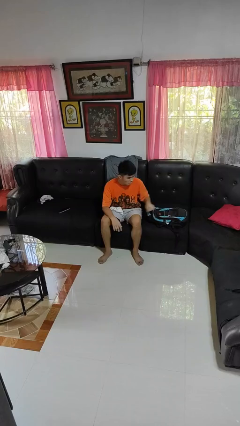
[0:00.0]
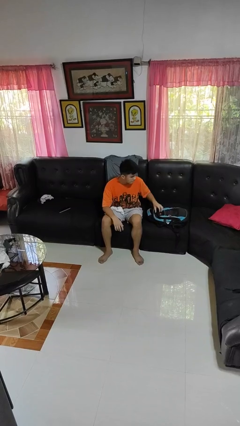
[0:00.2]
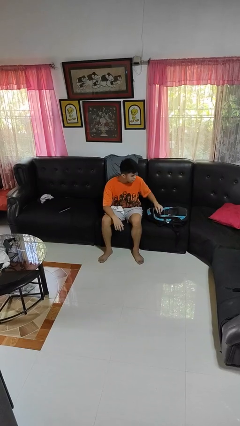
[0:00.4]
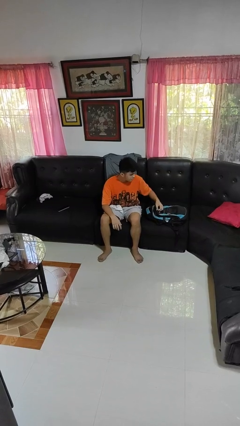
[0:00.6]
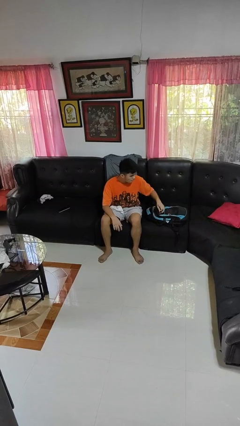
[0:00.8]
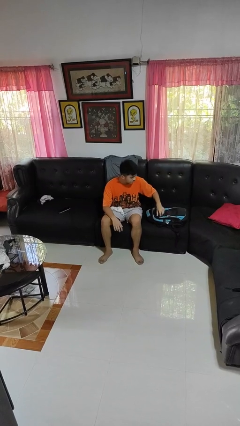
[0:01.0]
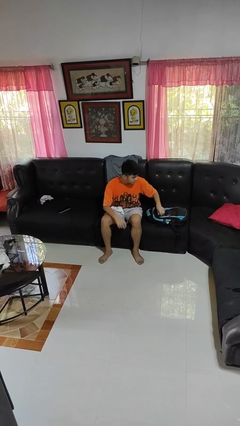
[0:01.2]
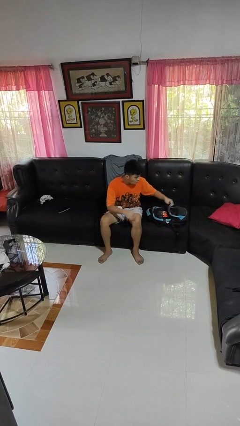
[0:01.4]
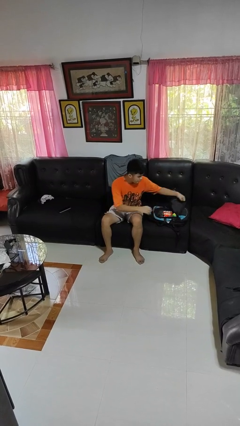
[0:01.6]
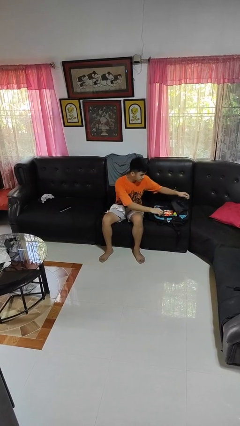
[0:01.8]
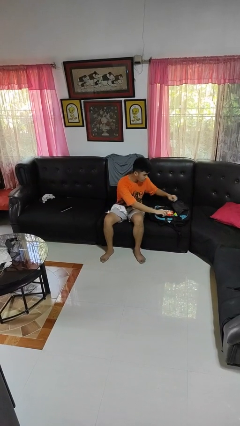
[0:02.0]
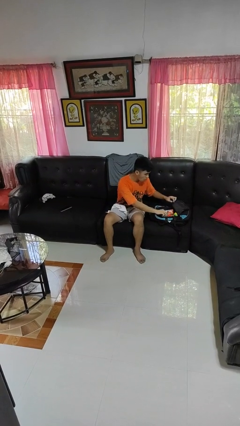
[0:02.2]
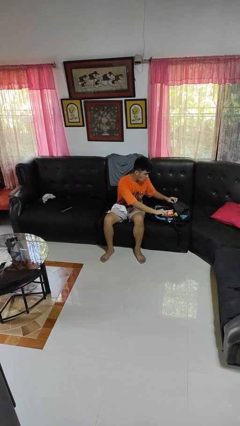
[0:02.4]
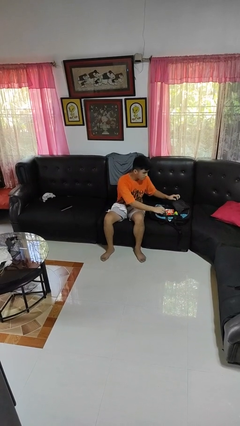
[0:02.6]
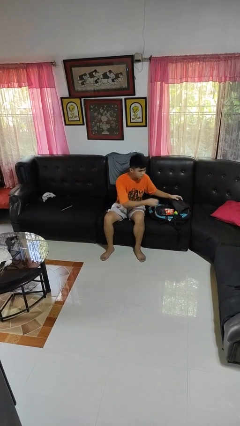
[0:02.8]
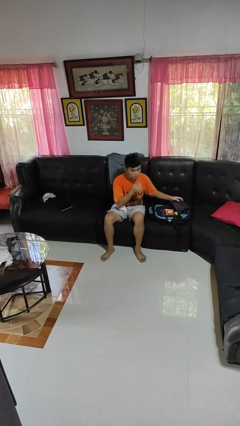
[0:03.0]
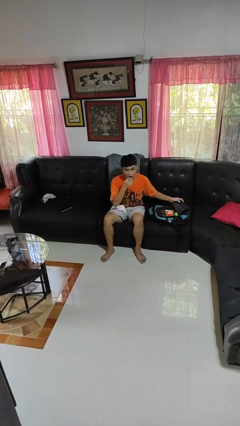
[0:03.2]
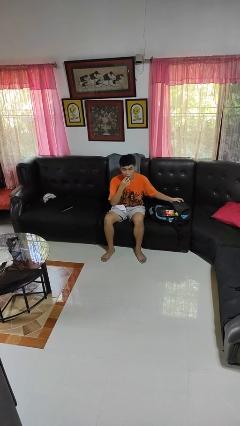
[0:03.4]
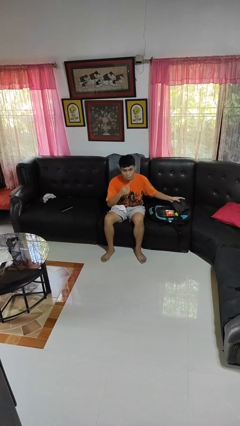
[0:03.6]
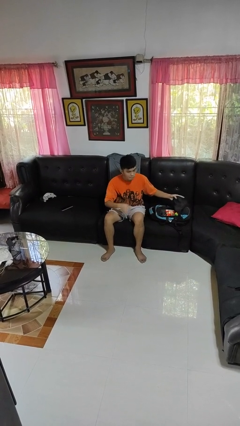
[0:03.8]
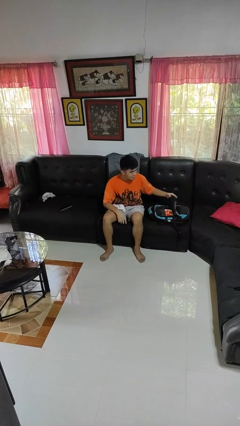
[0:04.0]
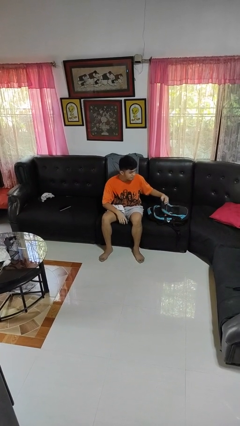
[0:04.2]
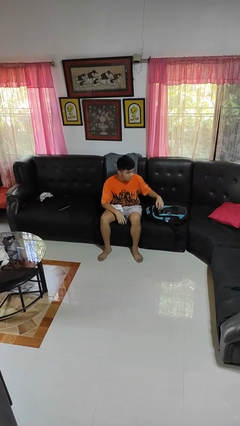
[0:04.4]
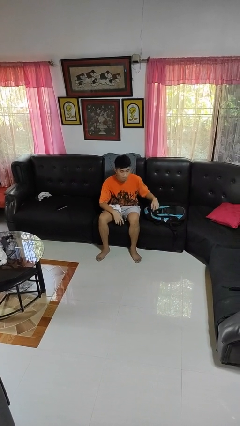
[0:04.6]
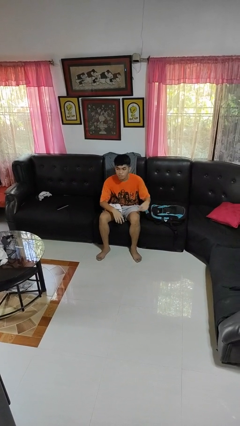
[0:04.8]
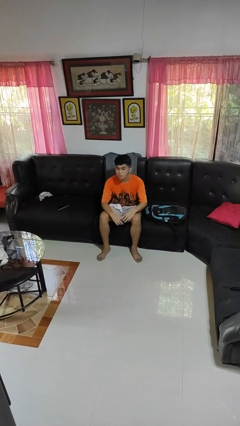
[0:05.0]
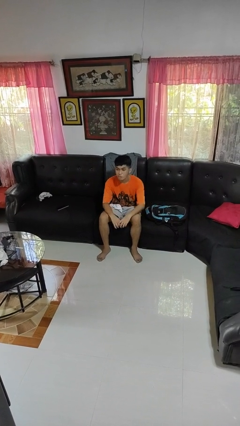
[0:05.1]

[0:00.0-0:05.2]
person eats snack from bag

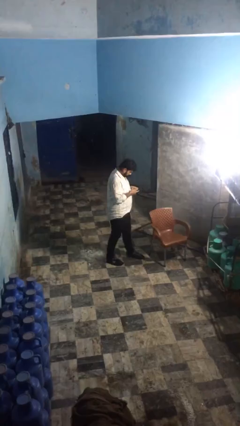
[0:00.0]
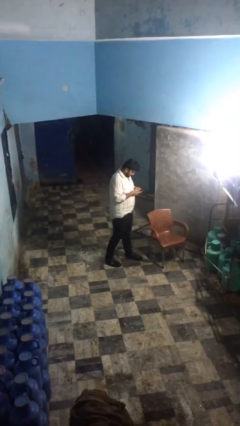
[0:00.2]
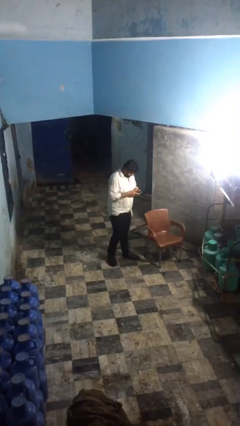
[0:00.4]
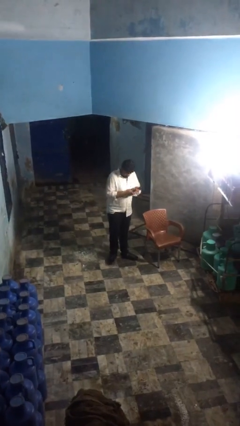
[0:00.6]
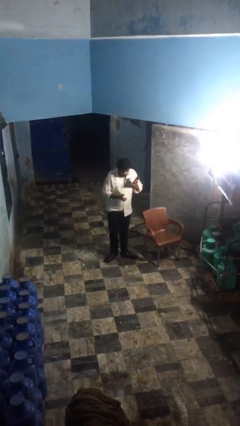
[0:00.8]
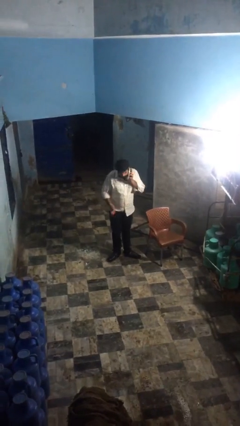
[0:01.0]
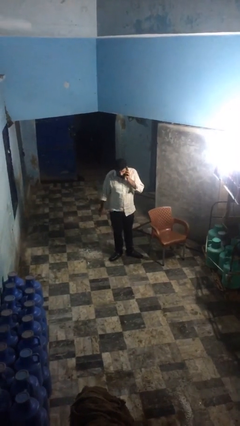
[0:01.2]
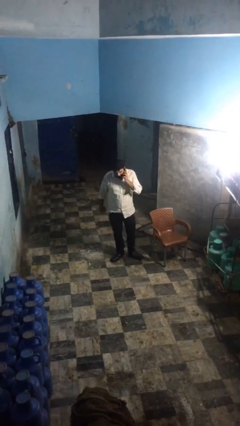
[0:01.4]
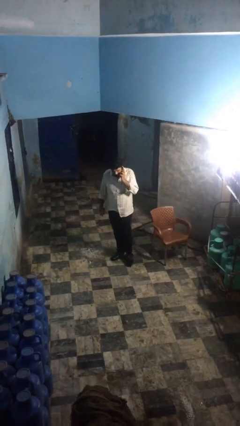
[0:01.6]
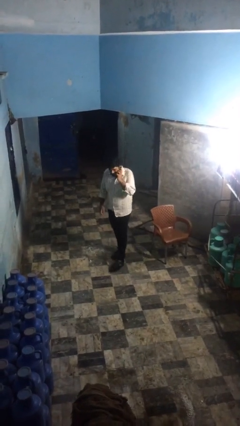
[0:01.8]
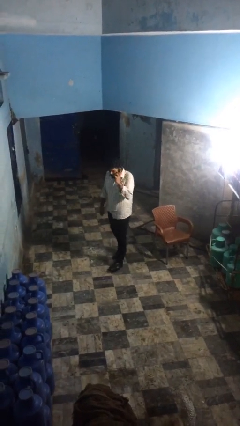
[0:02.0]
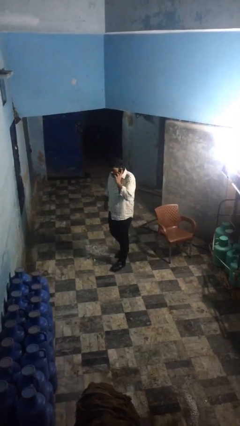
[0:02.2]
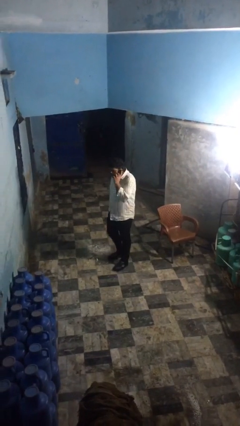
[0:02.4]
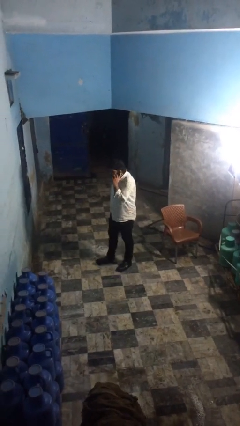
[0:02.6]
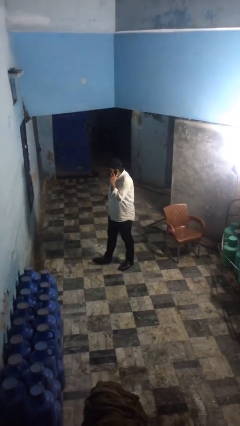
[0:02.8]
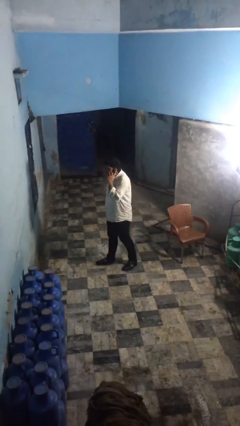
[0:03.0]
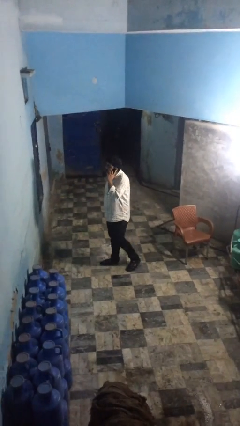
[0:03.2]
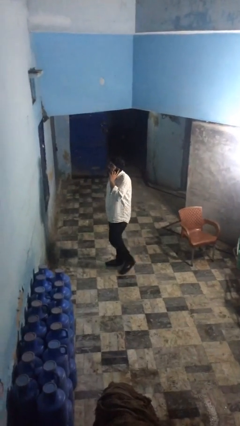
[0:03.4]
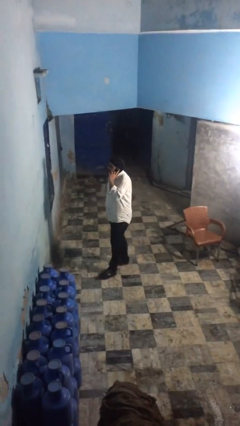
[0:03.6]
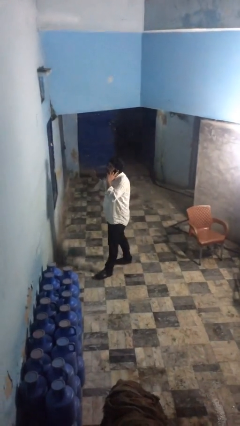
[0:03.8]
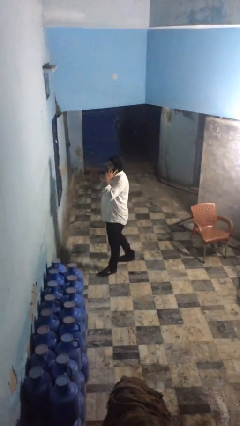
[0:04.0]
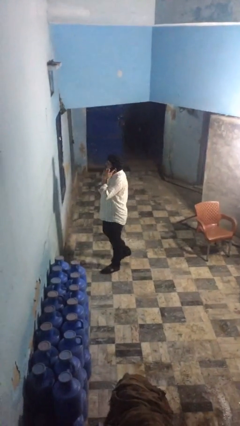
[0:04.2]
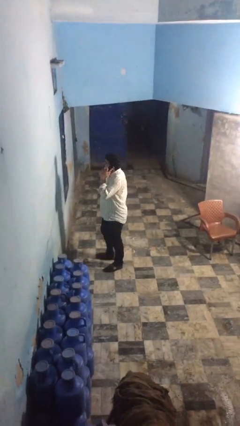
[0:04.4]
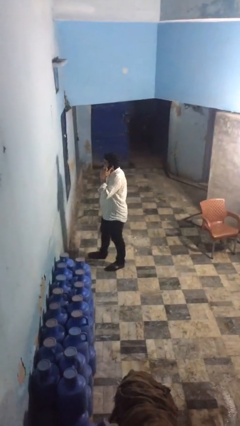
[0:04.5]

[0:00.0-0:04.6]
person talks on phone

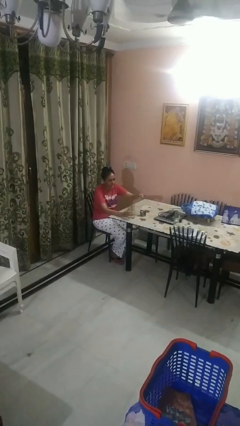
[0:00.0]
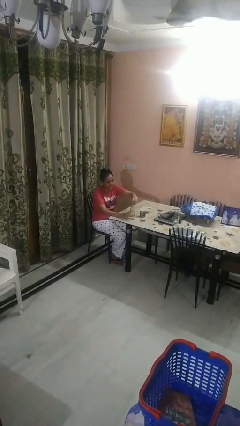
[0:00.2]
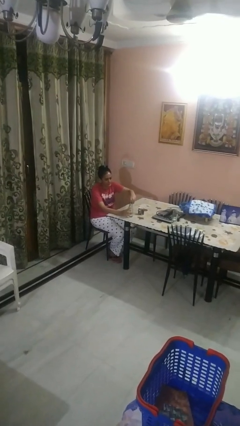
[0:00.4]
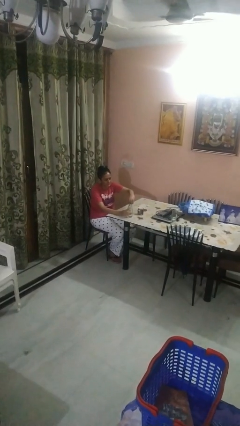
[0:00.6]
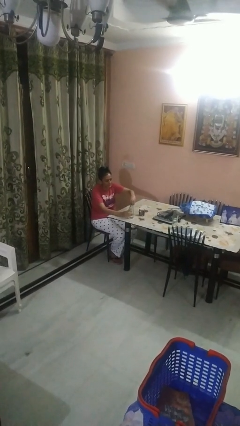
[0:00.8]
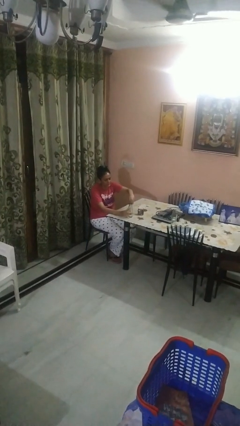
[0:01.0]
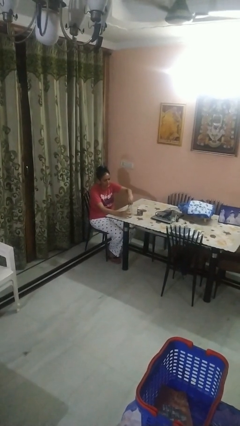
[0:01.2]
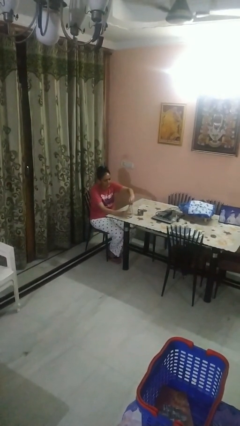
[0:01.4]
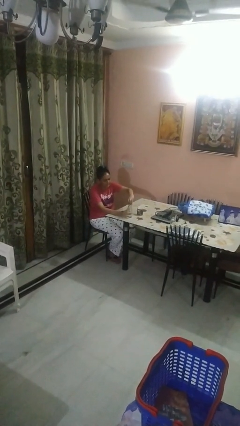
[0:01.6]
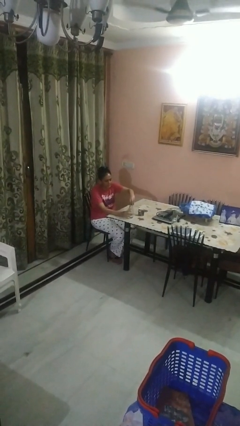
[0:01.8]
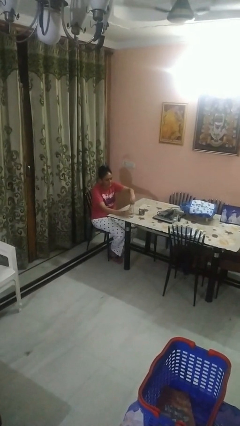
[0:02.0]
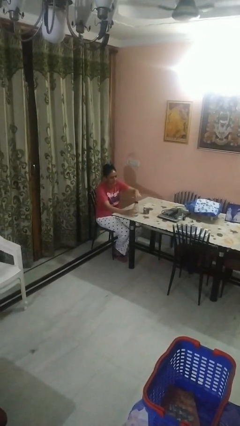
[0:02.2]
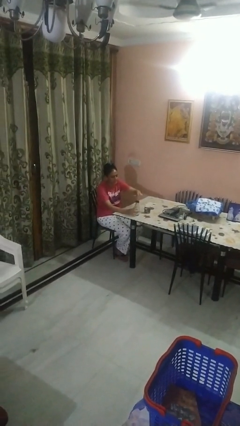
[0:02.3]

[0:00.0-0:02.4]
person screws lid to bottle

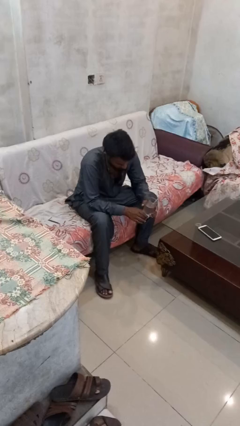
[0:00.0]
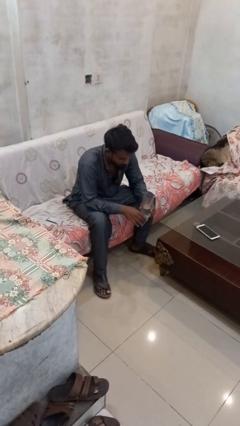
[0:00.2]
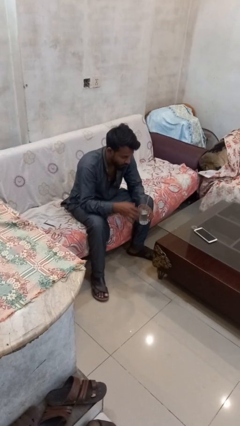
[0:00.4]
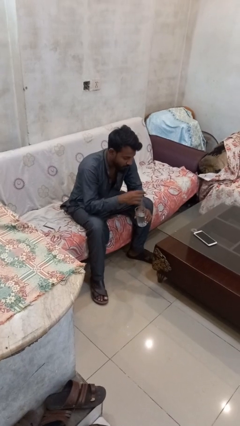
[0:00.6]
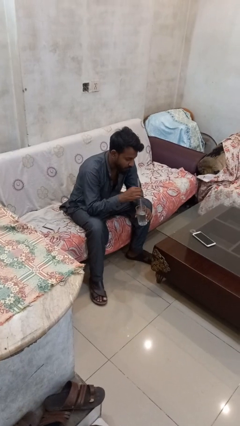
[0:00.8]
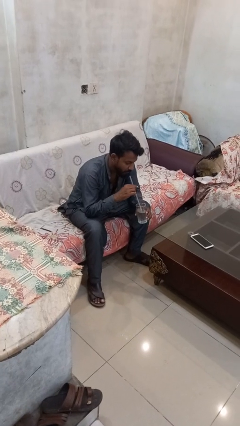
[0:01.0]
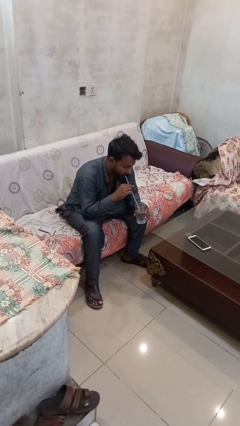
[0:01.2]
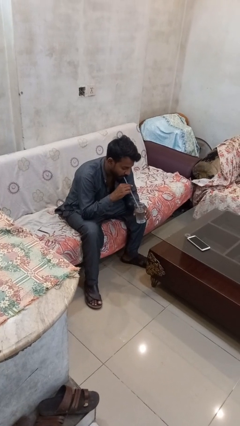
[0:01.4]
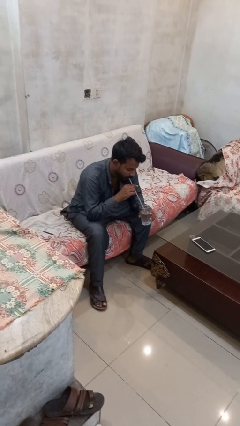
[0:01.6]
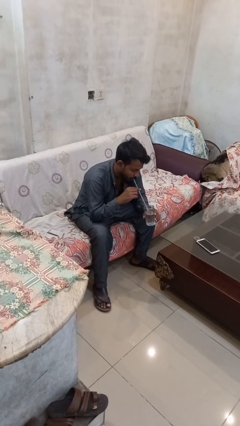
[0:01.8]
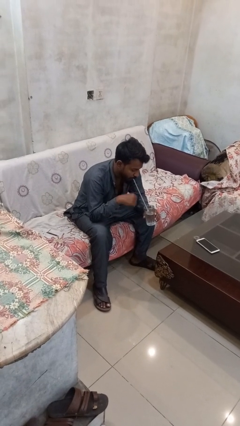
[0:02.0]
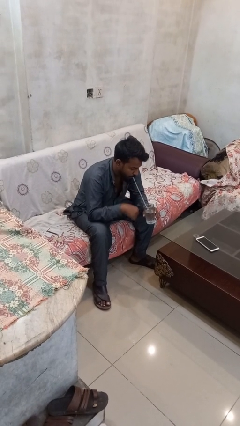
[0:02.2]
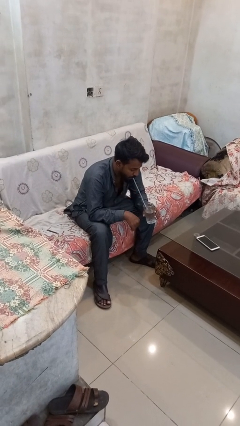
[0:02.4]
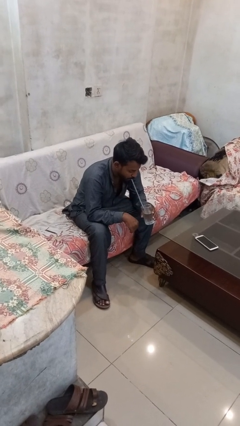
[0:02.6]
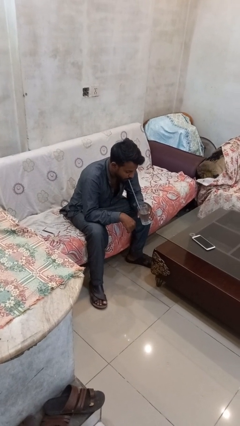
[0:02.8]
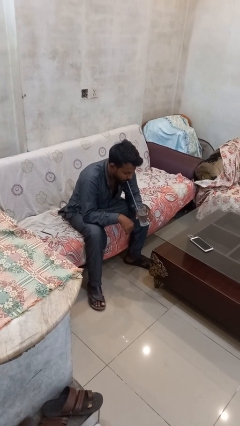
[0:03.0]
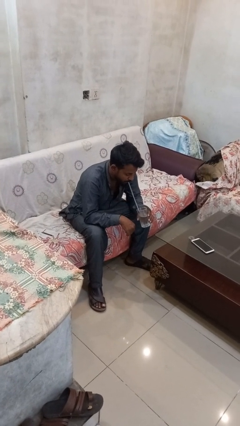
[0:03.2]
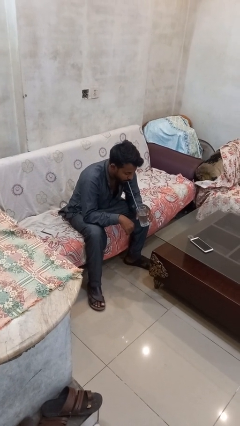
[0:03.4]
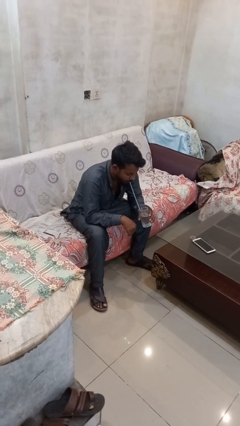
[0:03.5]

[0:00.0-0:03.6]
person drinks from straw

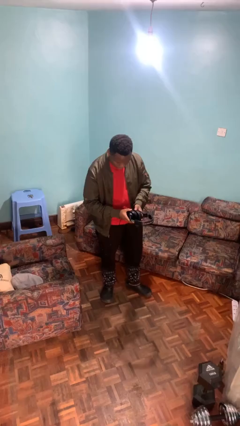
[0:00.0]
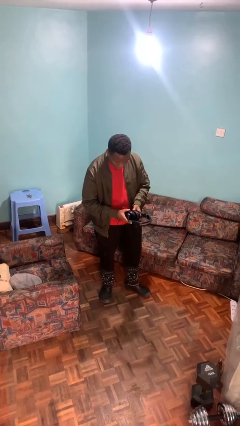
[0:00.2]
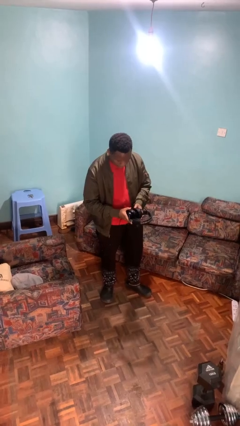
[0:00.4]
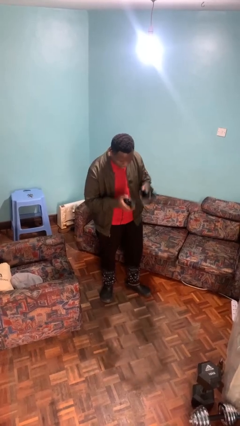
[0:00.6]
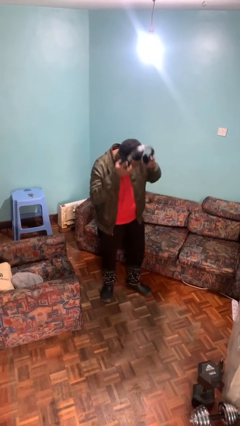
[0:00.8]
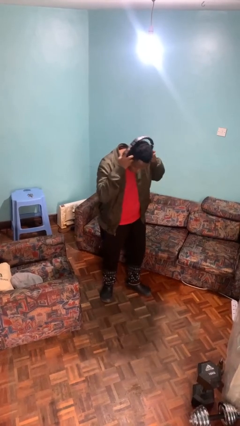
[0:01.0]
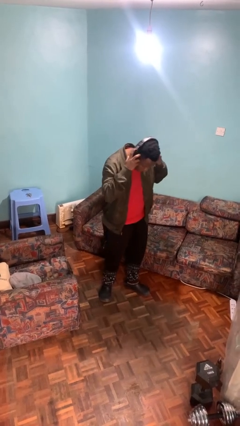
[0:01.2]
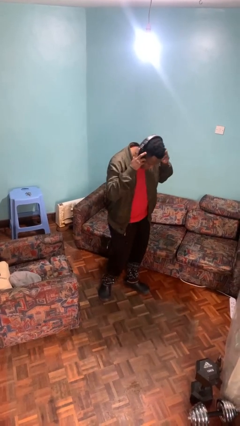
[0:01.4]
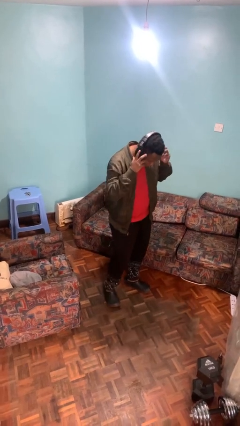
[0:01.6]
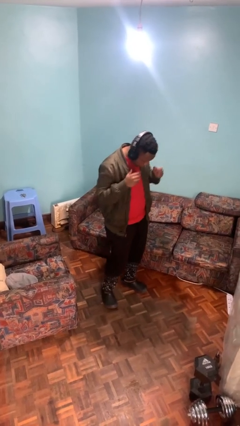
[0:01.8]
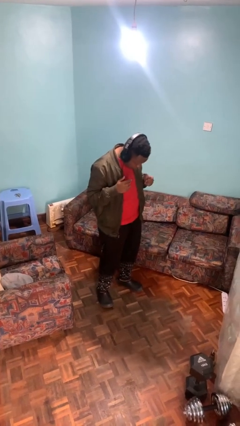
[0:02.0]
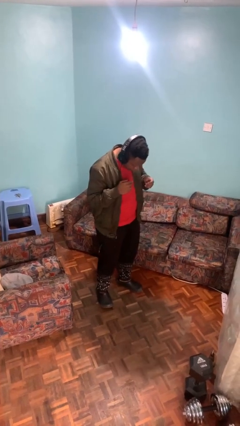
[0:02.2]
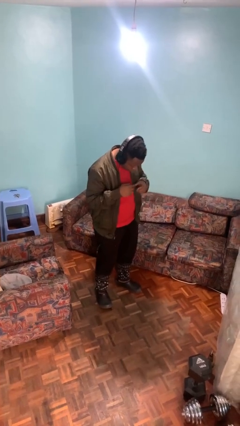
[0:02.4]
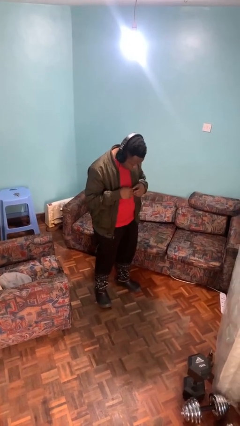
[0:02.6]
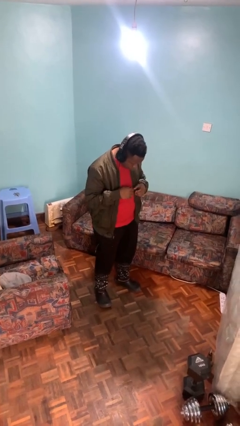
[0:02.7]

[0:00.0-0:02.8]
person puts on headphones
